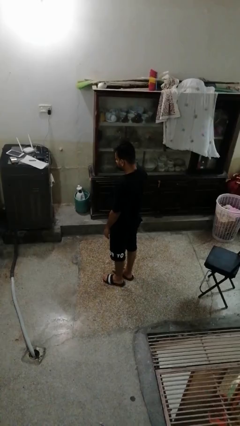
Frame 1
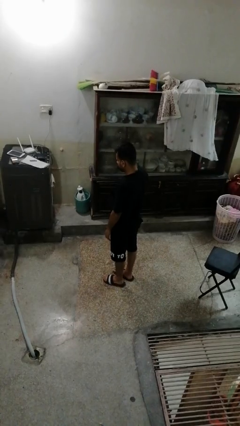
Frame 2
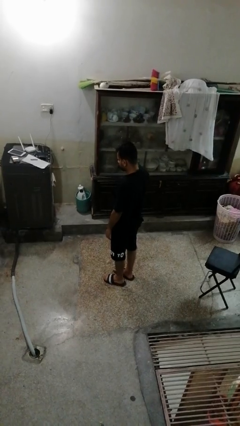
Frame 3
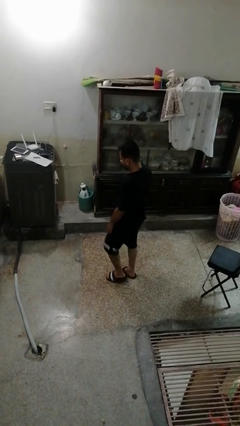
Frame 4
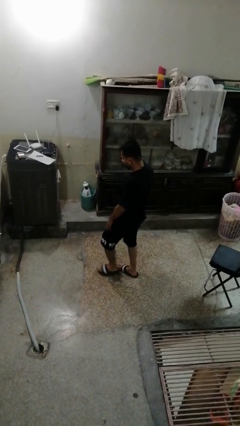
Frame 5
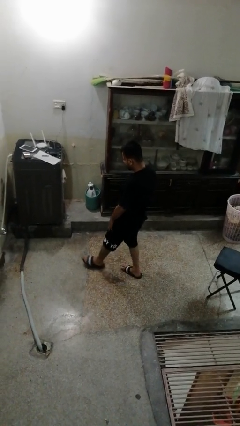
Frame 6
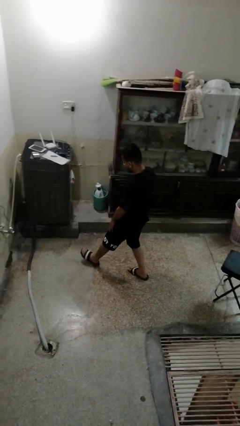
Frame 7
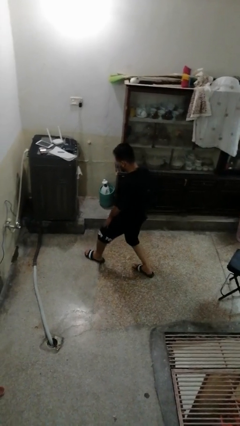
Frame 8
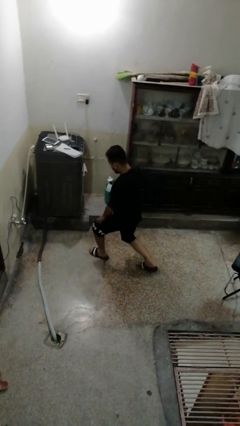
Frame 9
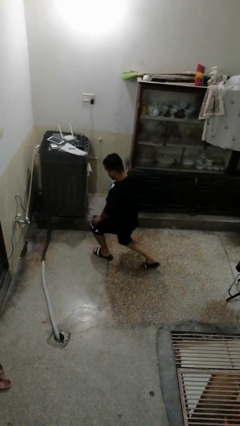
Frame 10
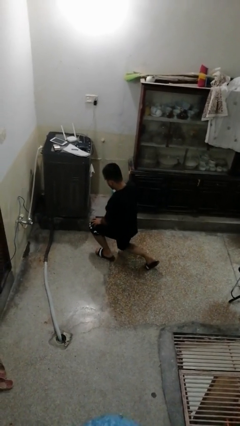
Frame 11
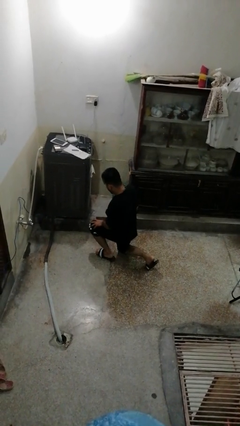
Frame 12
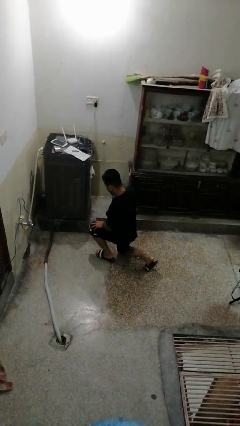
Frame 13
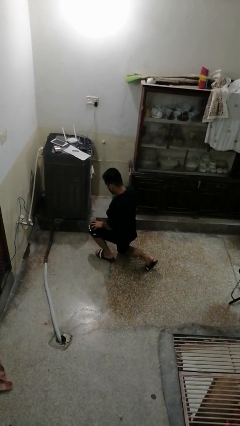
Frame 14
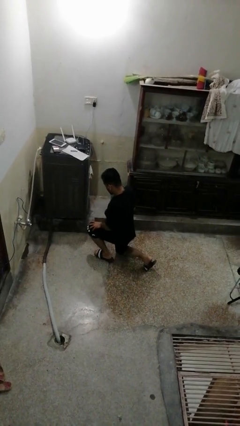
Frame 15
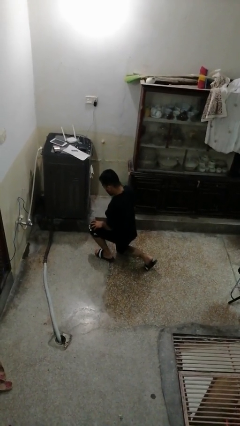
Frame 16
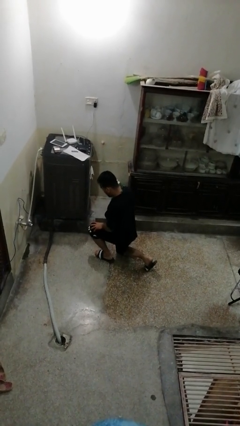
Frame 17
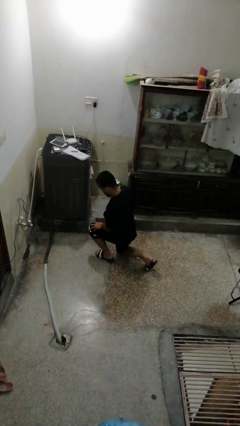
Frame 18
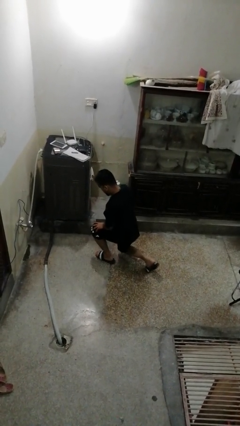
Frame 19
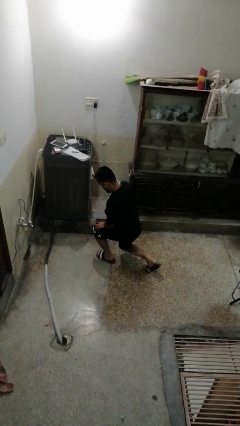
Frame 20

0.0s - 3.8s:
person exercises with lunges

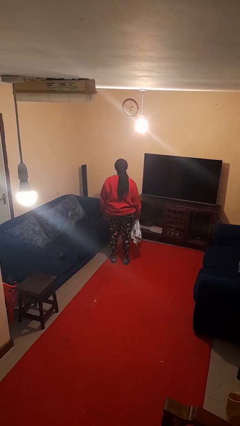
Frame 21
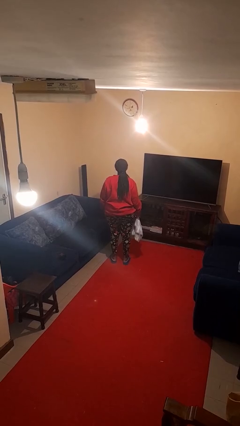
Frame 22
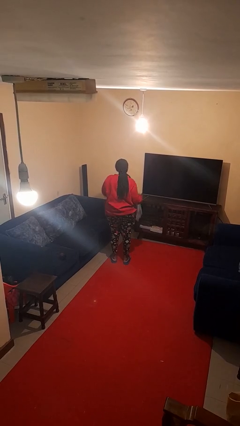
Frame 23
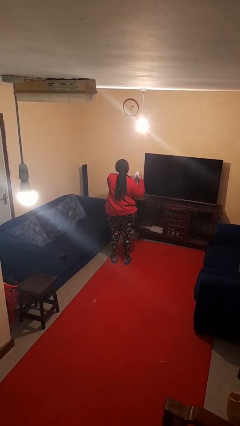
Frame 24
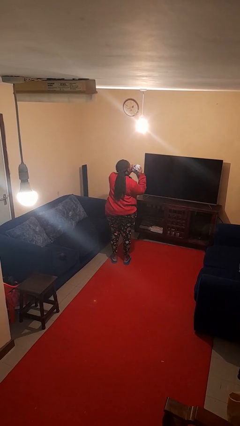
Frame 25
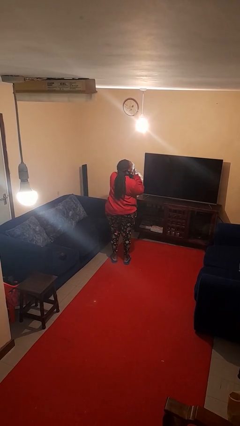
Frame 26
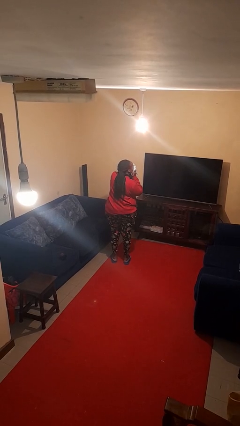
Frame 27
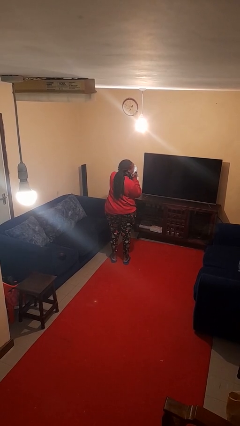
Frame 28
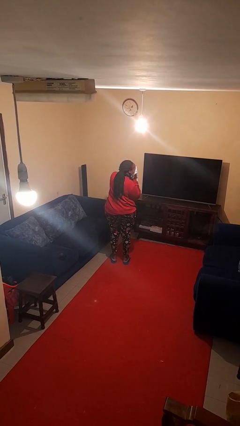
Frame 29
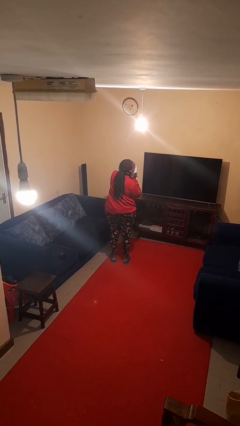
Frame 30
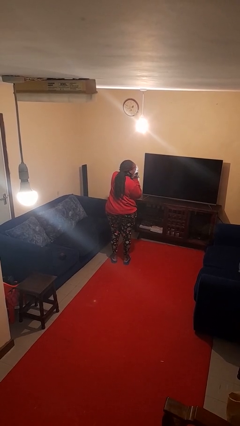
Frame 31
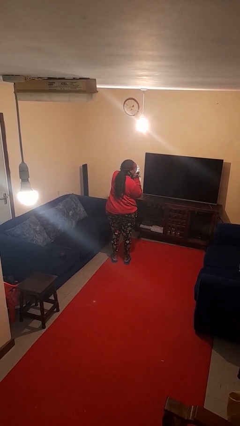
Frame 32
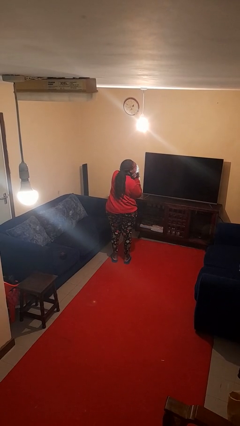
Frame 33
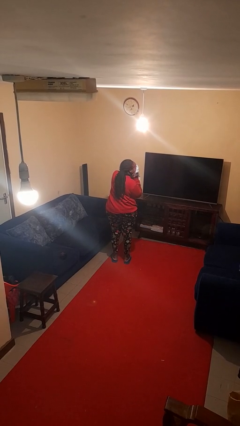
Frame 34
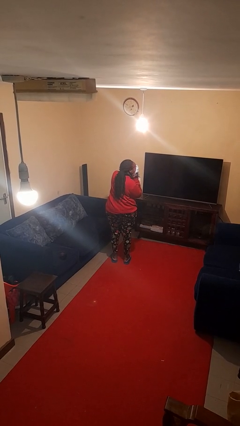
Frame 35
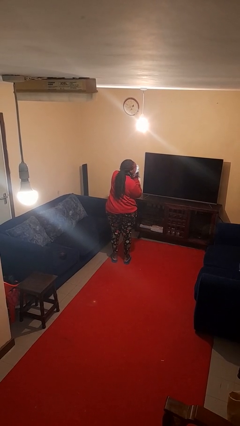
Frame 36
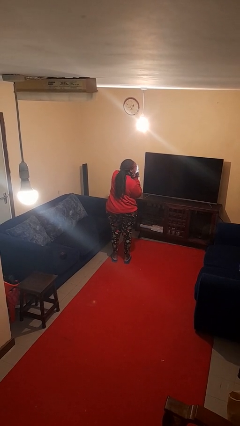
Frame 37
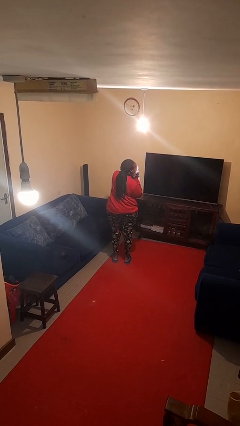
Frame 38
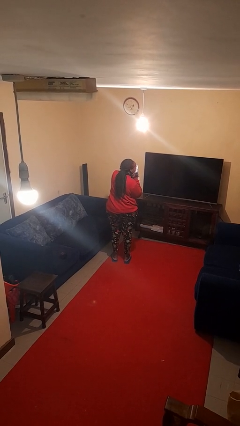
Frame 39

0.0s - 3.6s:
person blows nose

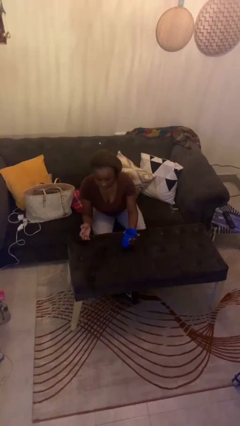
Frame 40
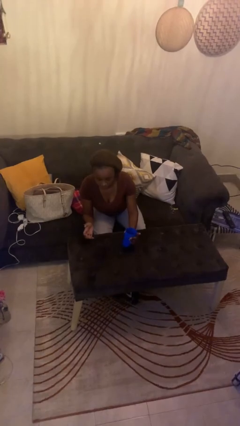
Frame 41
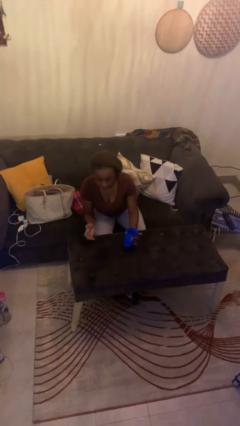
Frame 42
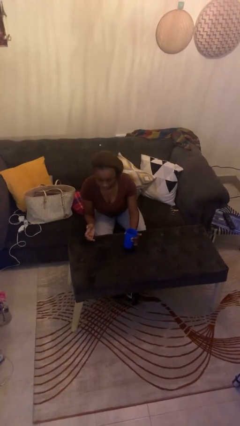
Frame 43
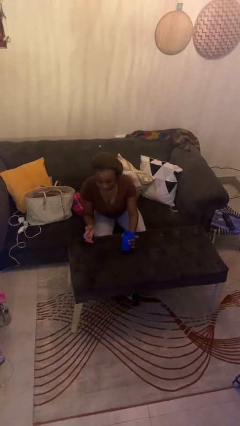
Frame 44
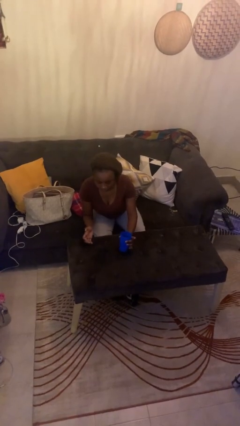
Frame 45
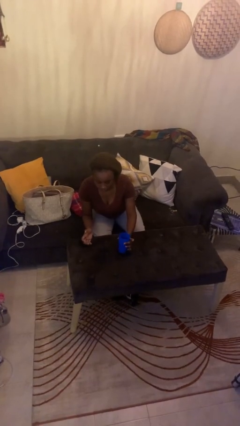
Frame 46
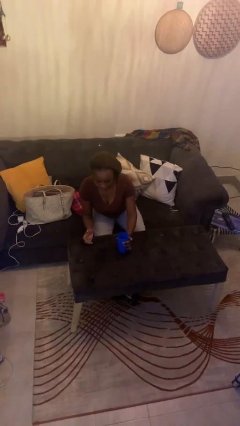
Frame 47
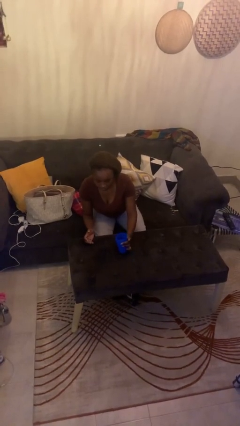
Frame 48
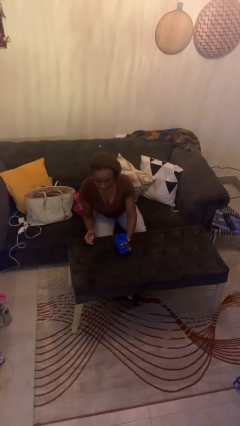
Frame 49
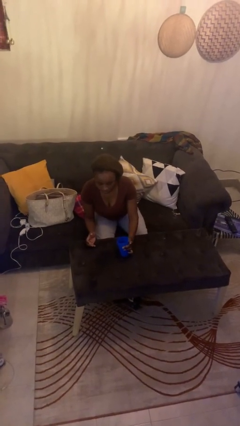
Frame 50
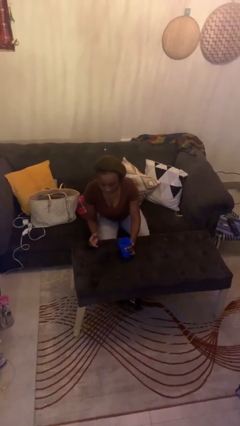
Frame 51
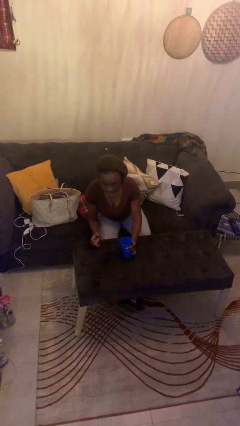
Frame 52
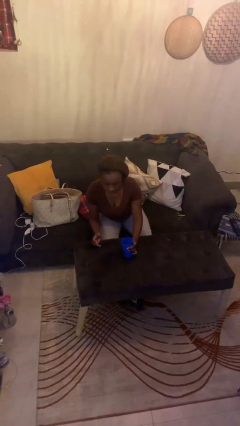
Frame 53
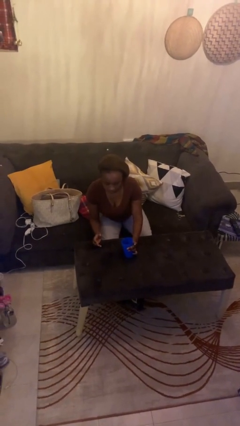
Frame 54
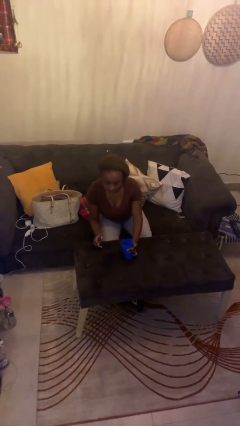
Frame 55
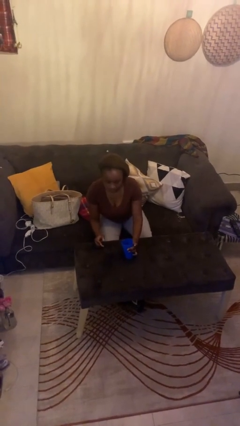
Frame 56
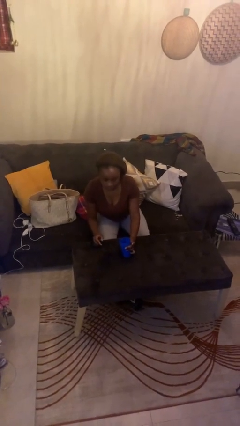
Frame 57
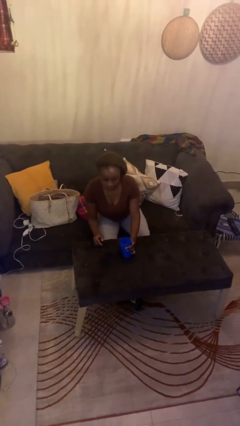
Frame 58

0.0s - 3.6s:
person sets upright glass

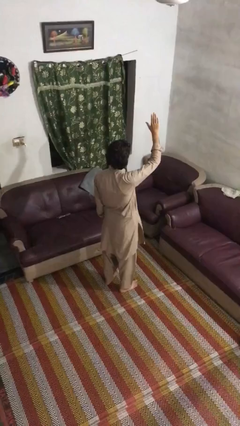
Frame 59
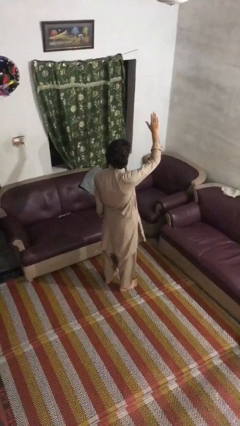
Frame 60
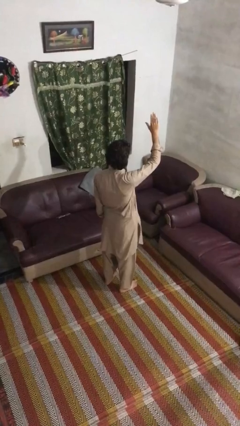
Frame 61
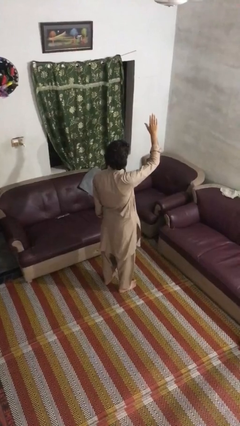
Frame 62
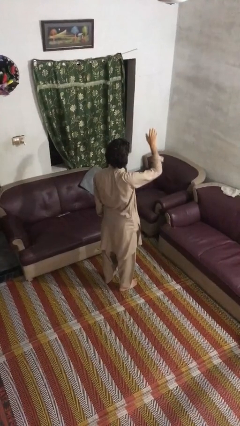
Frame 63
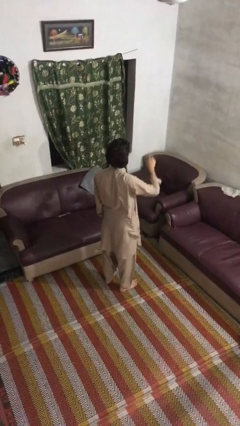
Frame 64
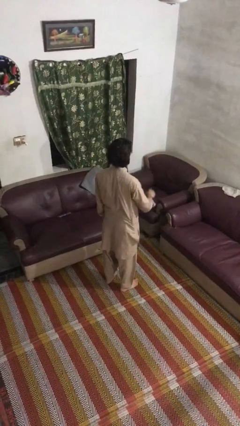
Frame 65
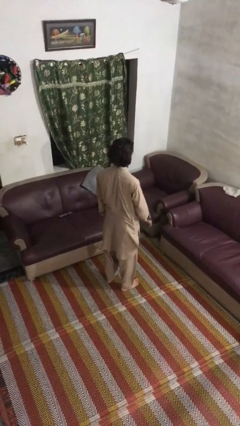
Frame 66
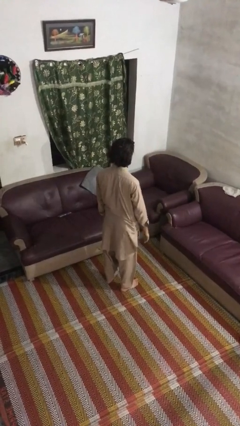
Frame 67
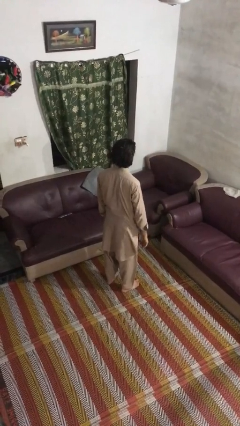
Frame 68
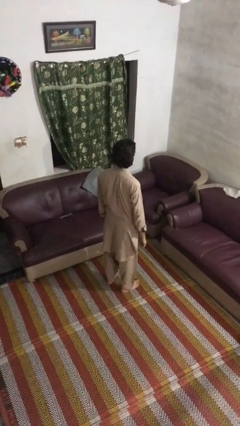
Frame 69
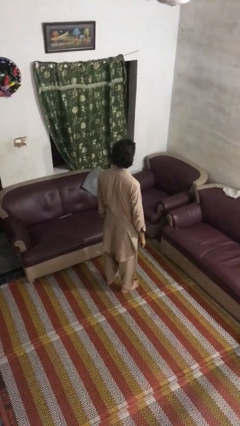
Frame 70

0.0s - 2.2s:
person gestures lower hand

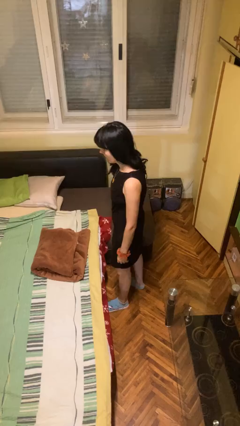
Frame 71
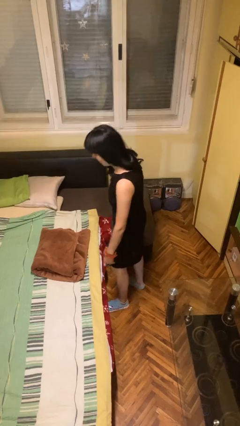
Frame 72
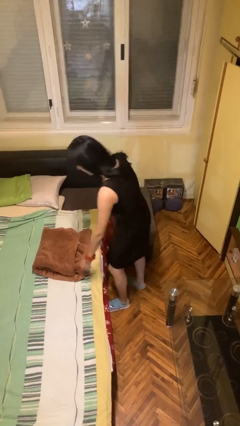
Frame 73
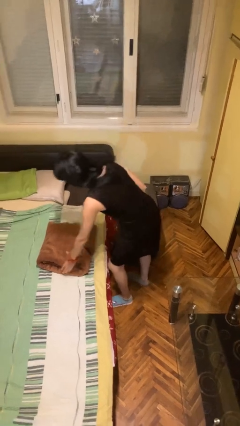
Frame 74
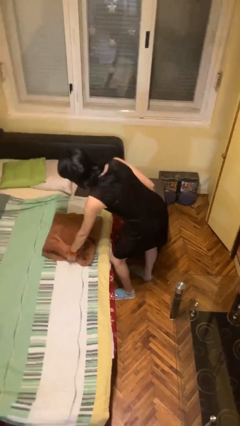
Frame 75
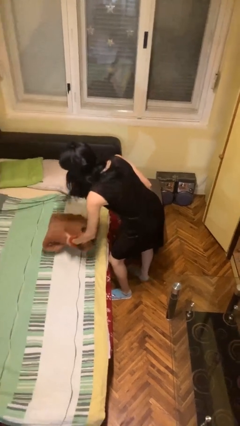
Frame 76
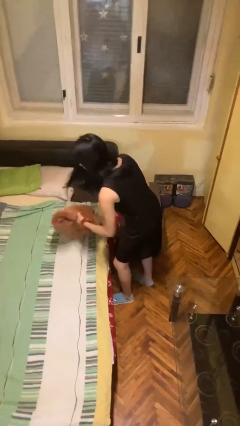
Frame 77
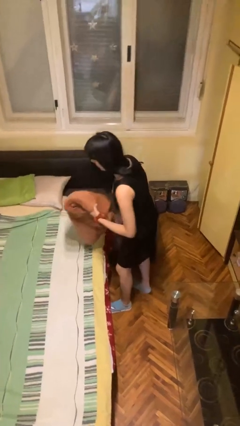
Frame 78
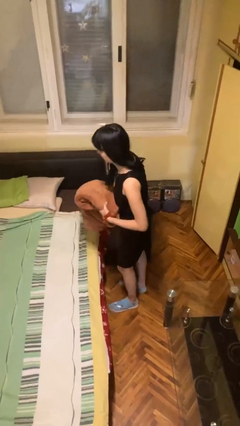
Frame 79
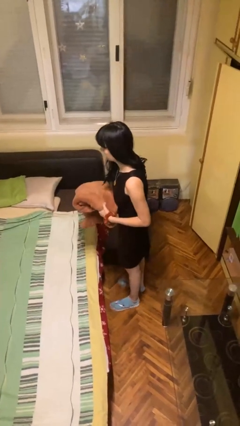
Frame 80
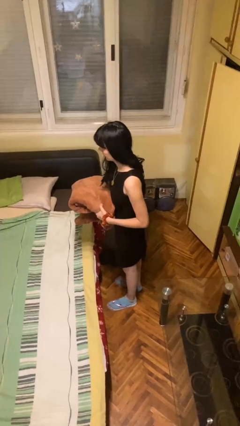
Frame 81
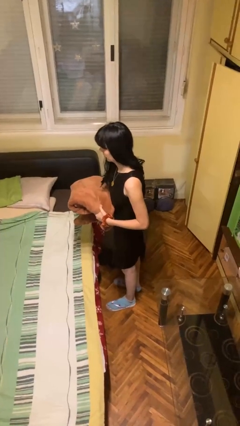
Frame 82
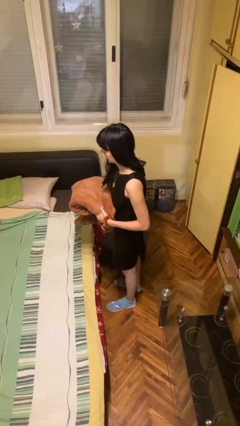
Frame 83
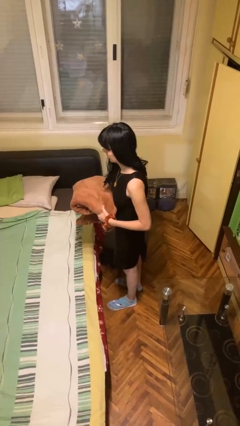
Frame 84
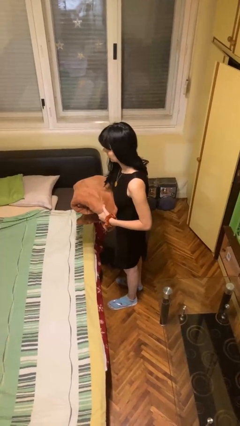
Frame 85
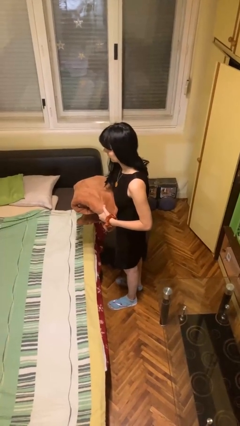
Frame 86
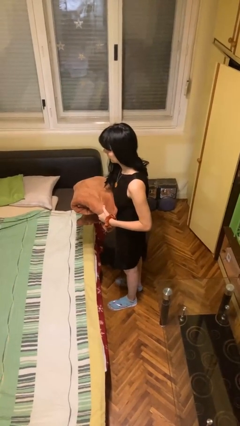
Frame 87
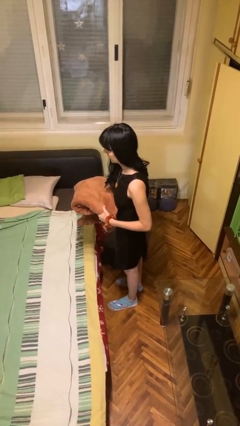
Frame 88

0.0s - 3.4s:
person picks up object from bed

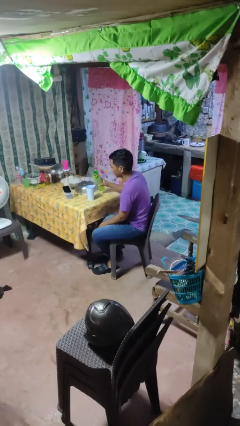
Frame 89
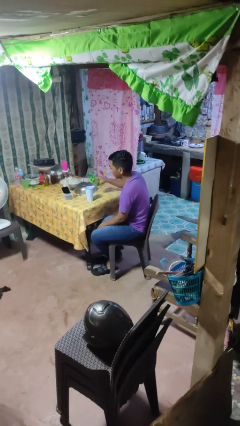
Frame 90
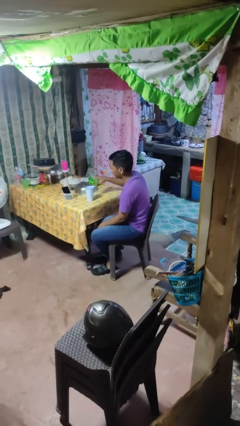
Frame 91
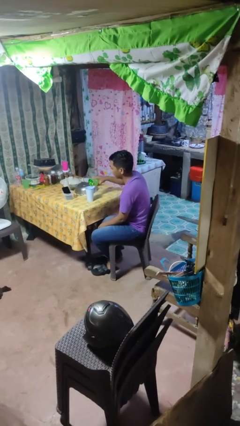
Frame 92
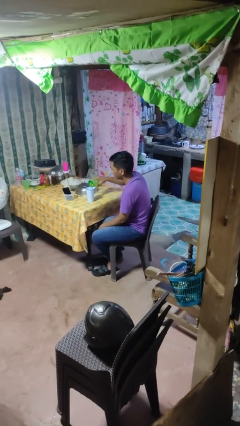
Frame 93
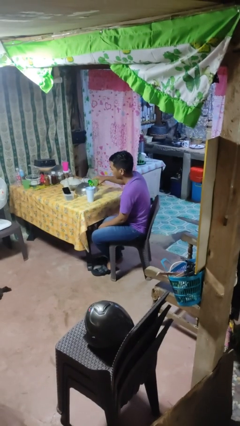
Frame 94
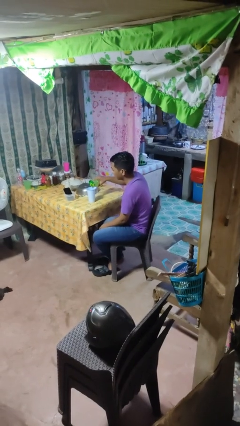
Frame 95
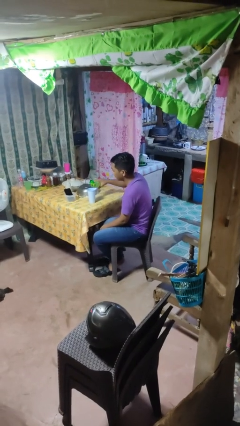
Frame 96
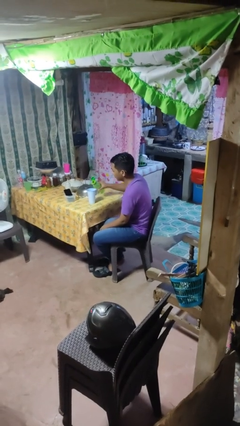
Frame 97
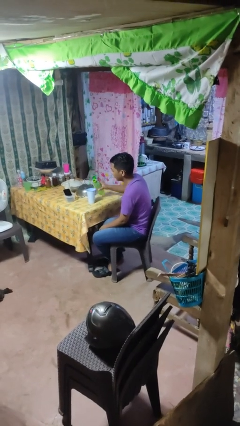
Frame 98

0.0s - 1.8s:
person pours liquid into cup
